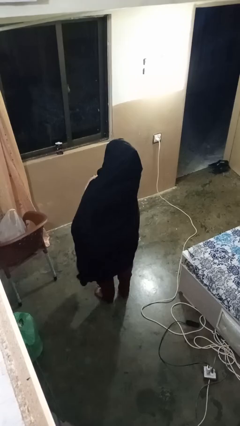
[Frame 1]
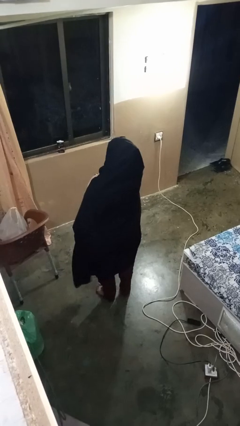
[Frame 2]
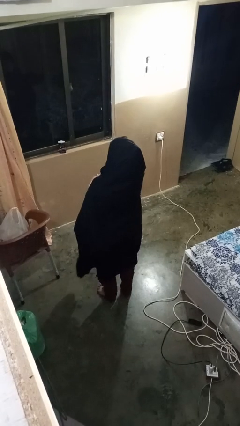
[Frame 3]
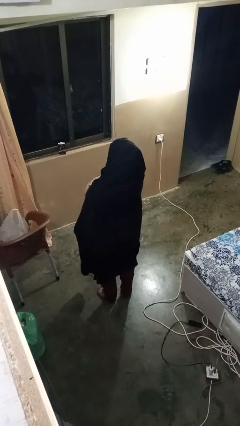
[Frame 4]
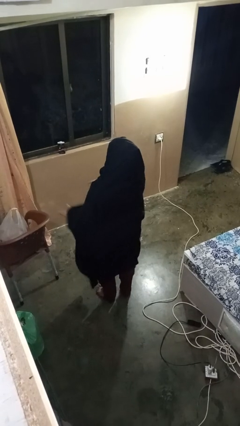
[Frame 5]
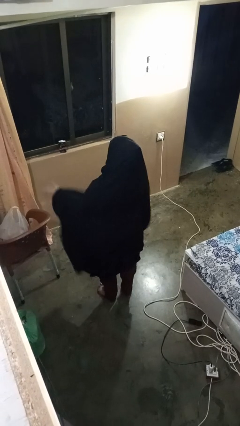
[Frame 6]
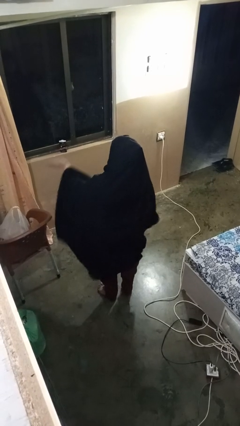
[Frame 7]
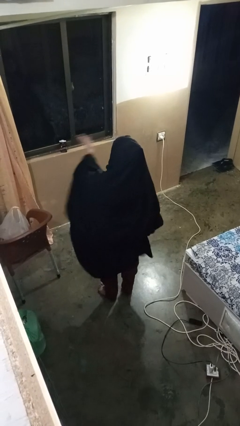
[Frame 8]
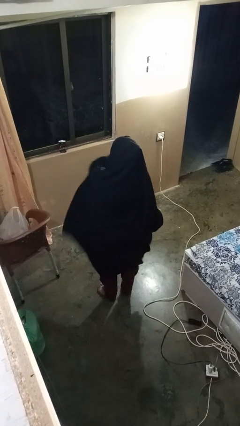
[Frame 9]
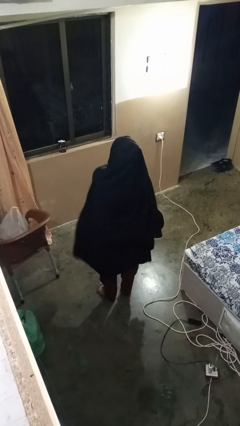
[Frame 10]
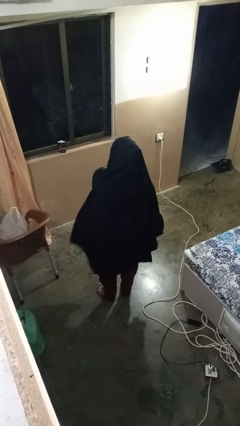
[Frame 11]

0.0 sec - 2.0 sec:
person gestures swipe right

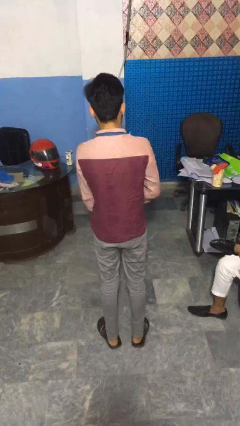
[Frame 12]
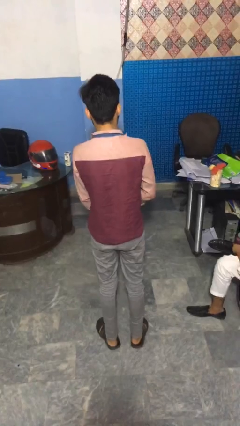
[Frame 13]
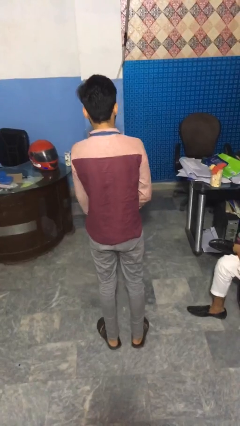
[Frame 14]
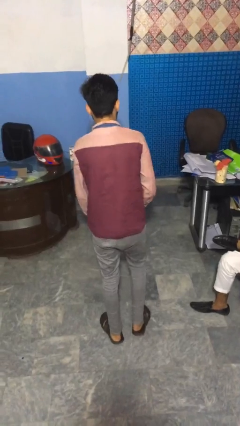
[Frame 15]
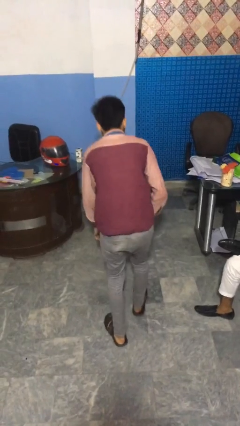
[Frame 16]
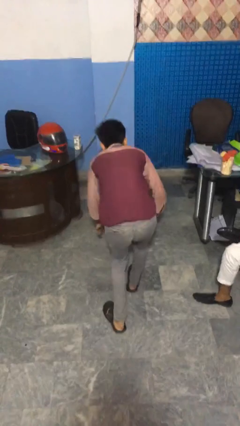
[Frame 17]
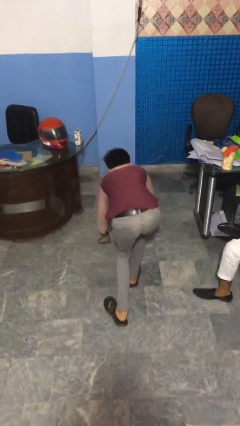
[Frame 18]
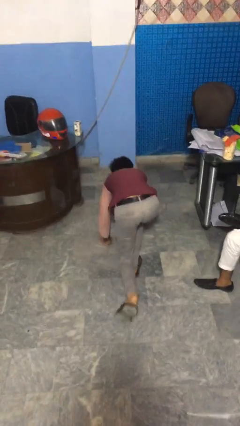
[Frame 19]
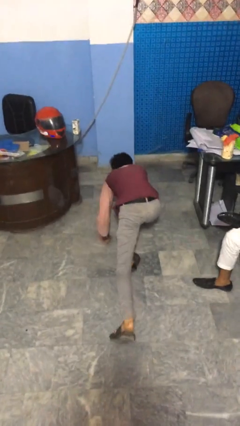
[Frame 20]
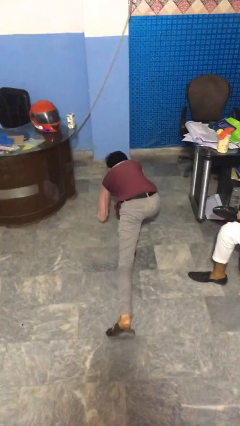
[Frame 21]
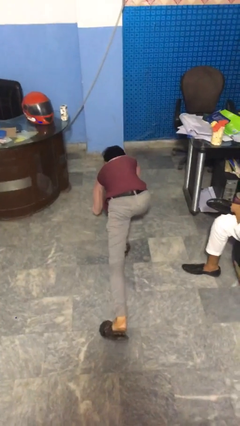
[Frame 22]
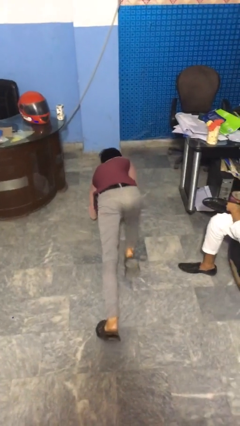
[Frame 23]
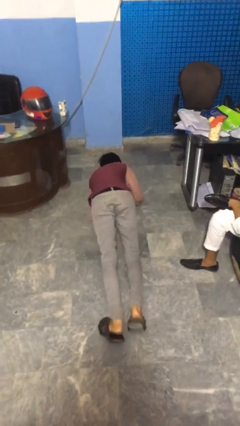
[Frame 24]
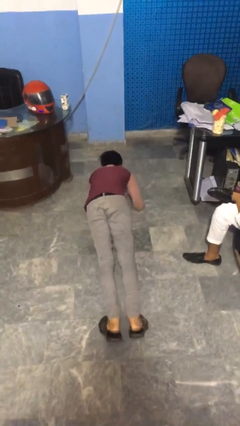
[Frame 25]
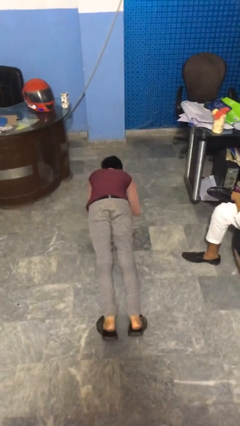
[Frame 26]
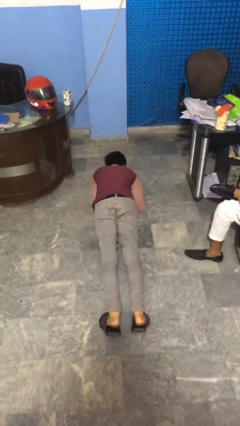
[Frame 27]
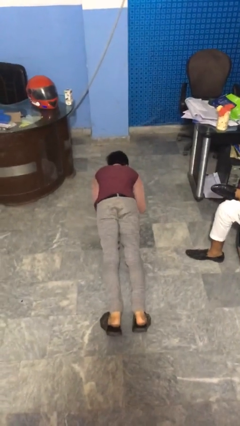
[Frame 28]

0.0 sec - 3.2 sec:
person exercises with plank

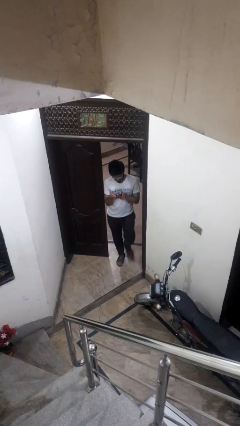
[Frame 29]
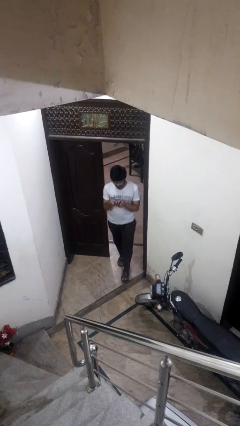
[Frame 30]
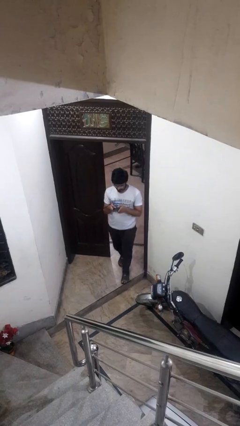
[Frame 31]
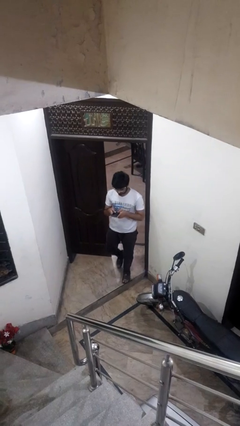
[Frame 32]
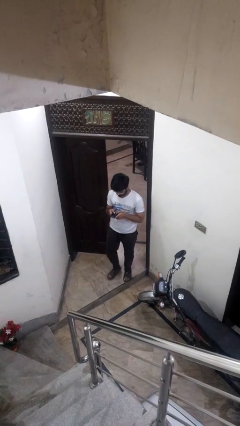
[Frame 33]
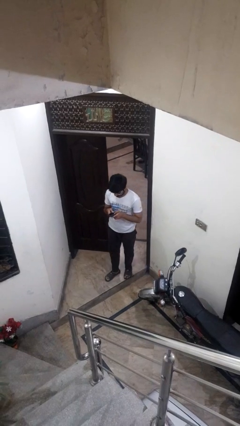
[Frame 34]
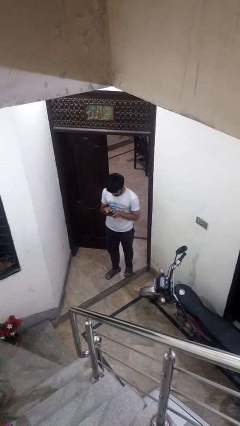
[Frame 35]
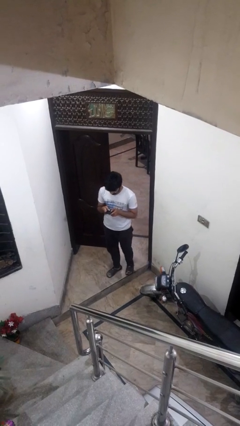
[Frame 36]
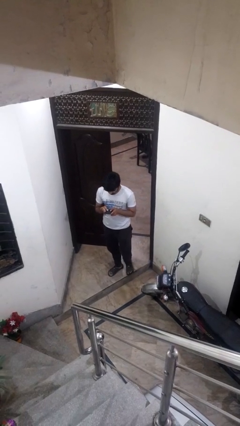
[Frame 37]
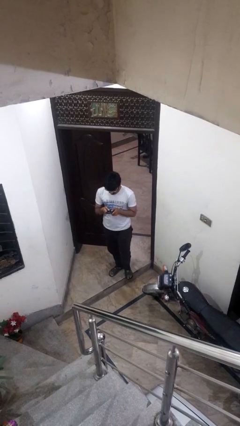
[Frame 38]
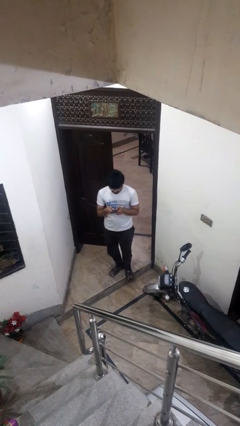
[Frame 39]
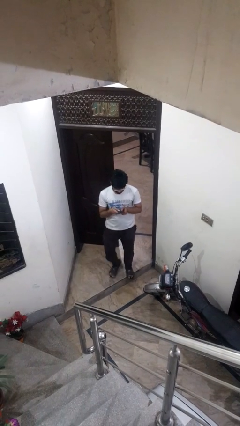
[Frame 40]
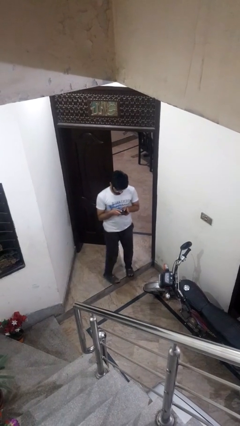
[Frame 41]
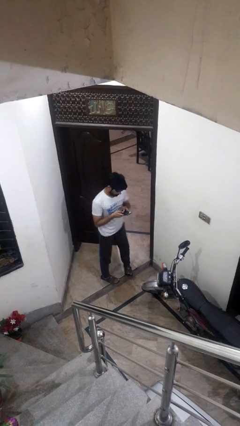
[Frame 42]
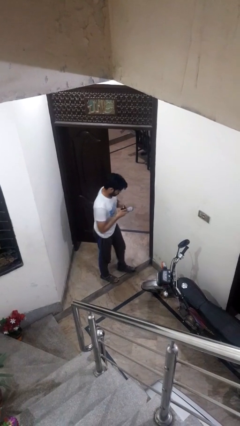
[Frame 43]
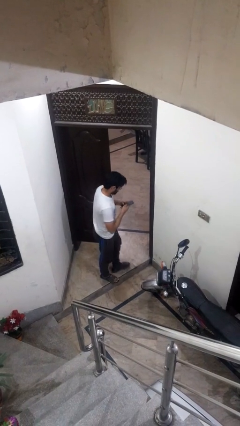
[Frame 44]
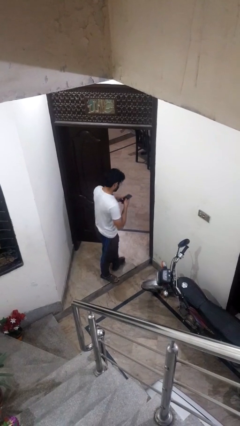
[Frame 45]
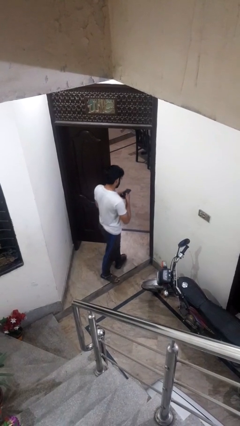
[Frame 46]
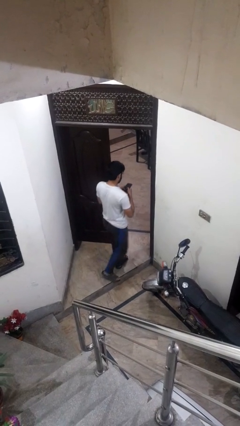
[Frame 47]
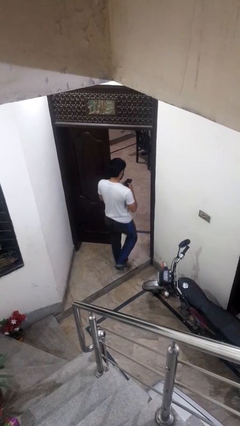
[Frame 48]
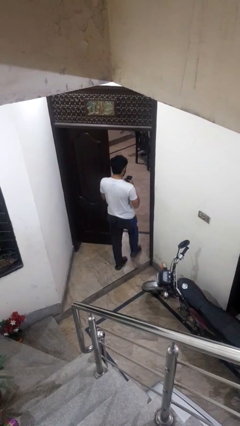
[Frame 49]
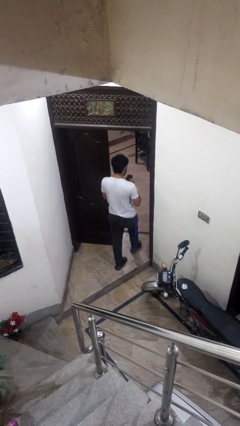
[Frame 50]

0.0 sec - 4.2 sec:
person enters scene through structure

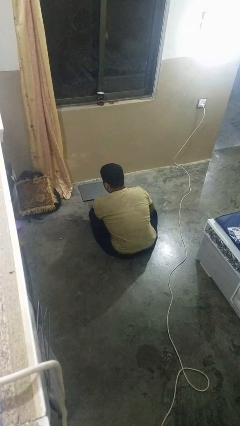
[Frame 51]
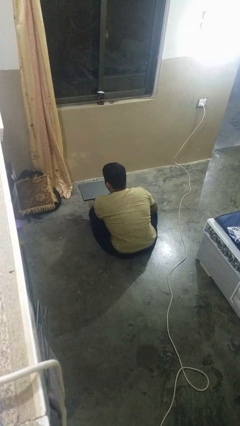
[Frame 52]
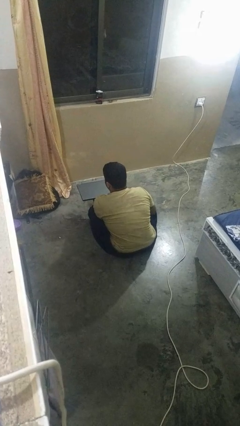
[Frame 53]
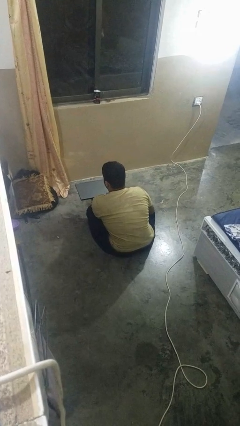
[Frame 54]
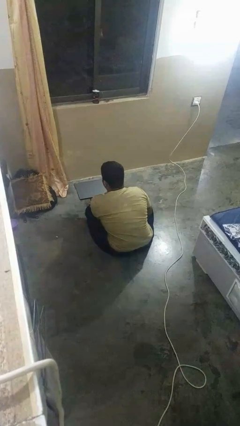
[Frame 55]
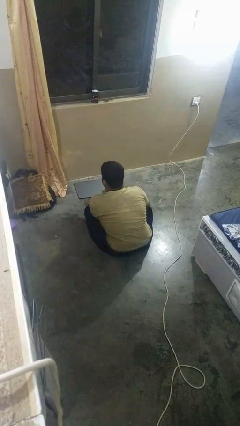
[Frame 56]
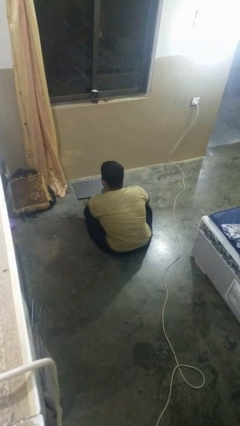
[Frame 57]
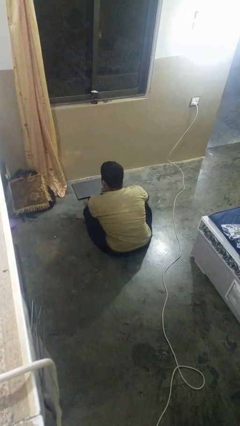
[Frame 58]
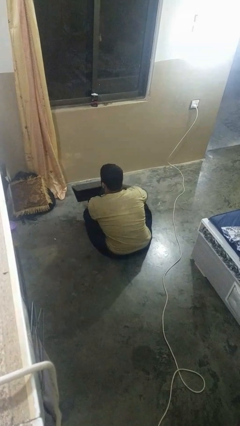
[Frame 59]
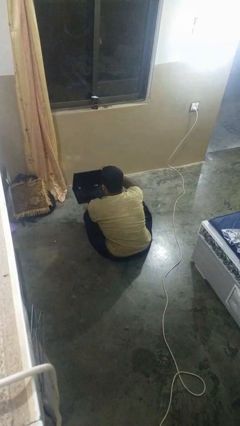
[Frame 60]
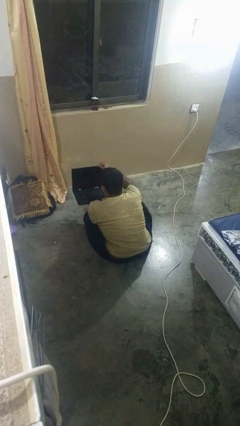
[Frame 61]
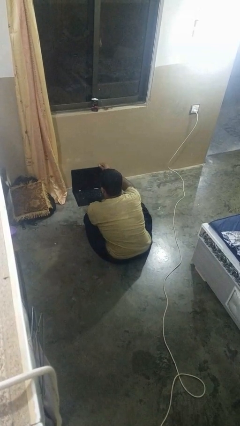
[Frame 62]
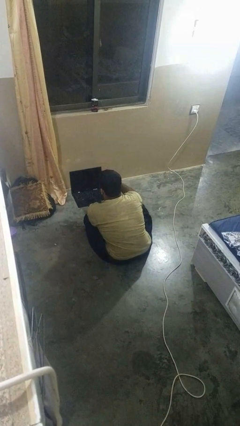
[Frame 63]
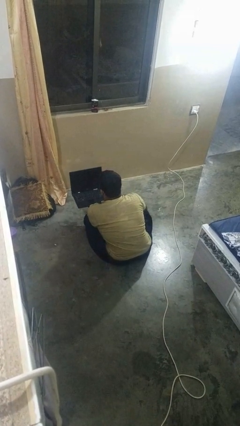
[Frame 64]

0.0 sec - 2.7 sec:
person opens laptop

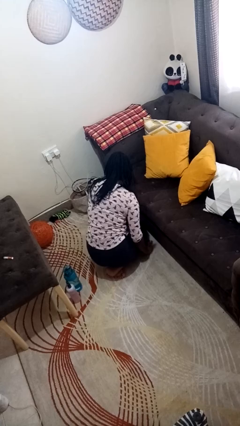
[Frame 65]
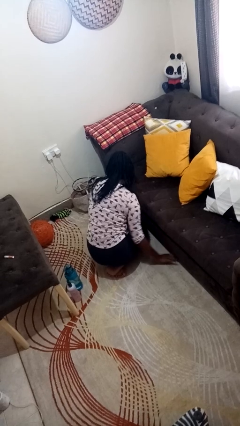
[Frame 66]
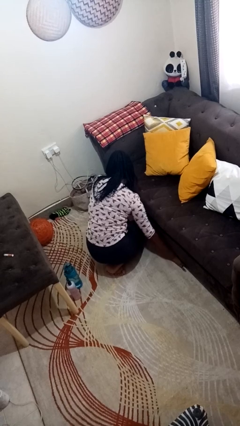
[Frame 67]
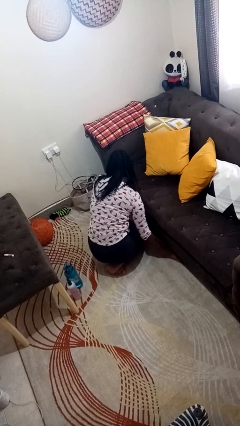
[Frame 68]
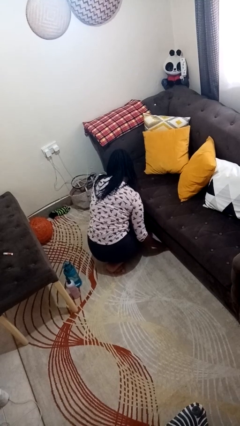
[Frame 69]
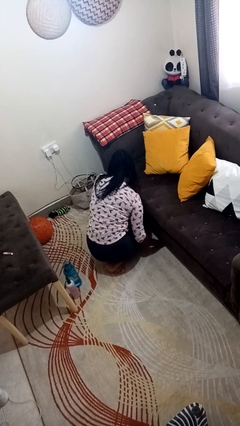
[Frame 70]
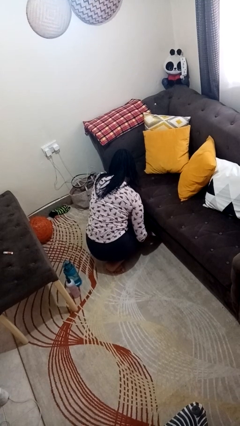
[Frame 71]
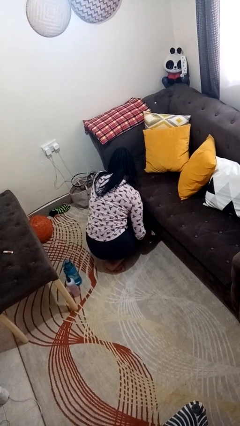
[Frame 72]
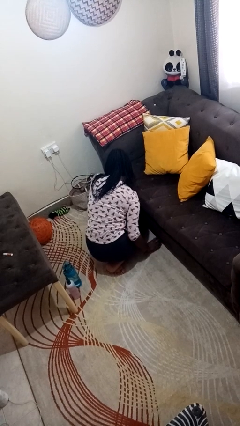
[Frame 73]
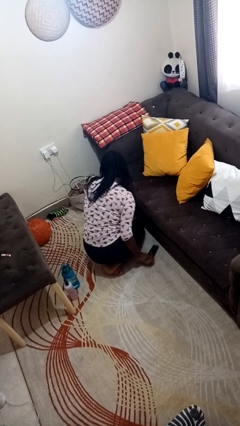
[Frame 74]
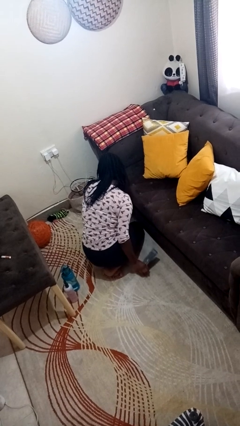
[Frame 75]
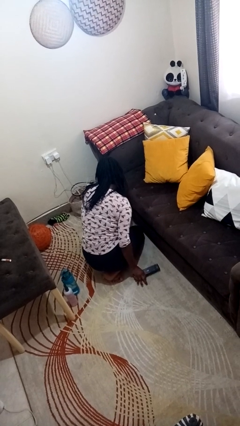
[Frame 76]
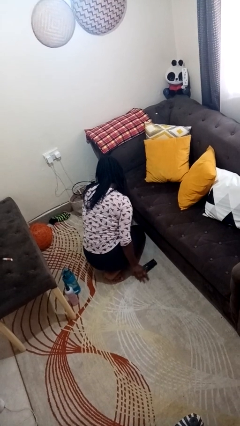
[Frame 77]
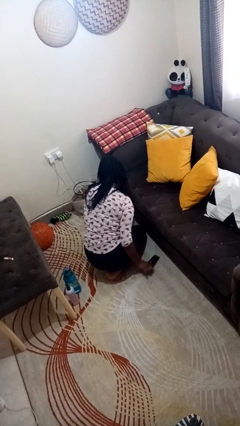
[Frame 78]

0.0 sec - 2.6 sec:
person searches under couch

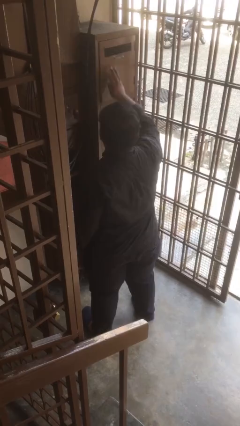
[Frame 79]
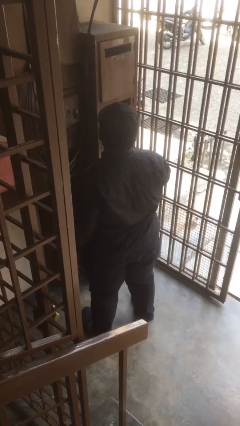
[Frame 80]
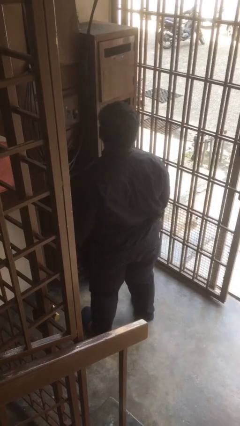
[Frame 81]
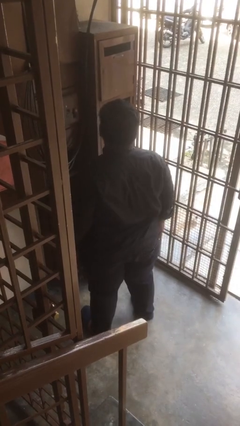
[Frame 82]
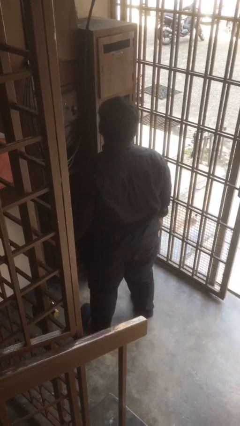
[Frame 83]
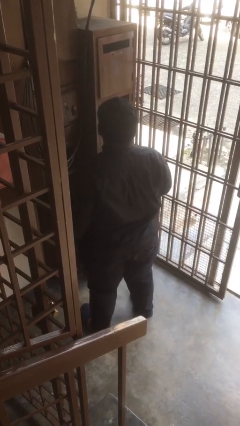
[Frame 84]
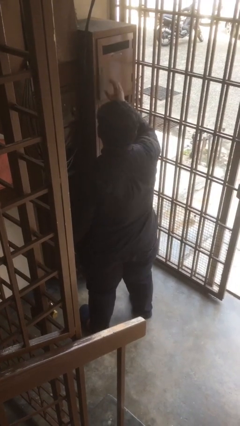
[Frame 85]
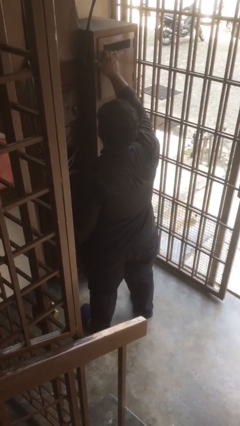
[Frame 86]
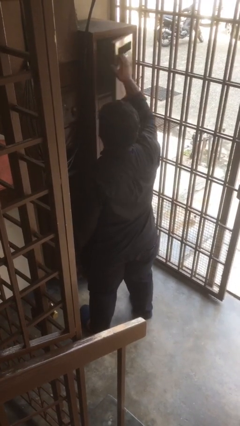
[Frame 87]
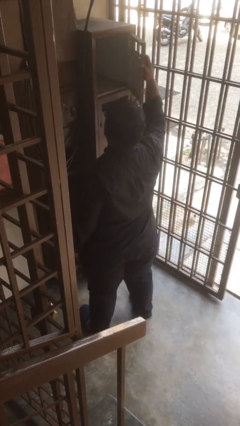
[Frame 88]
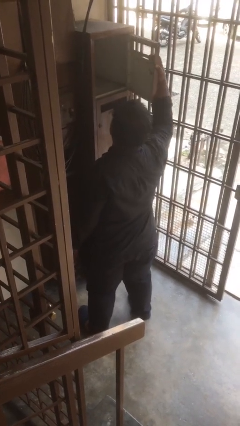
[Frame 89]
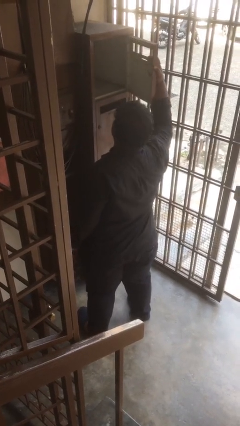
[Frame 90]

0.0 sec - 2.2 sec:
person opens mailbox

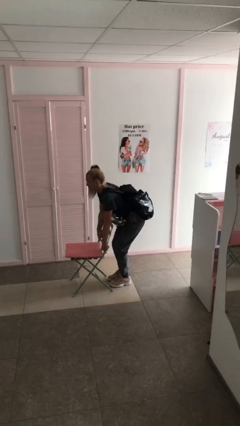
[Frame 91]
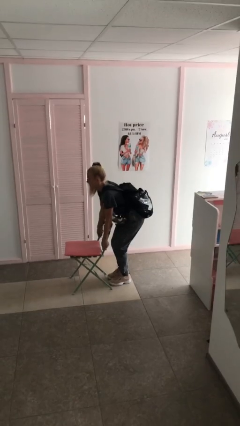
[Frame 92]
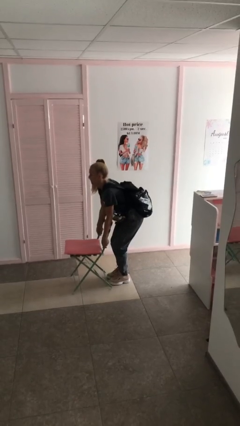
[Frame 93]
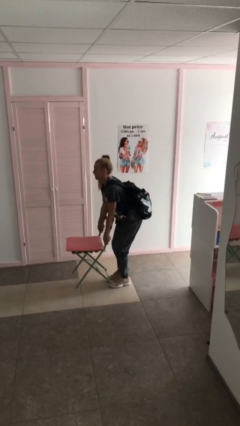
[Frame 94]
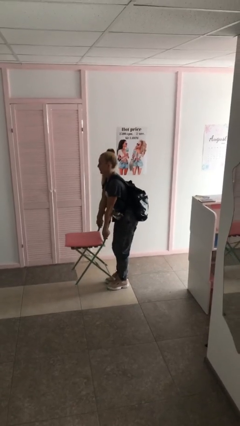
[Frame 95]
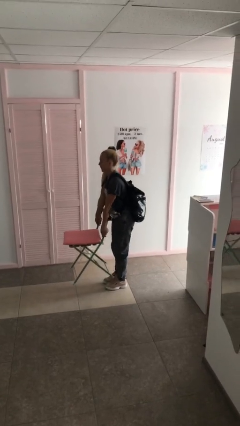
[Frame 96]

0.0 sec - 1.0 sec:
person picks up object from floor
